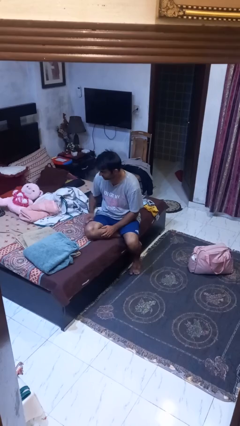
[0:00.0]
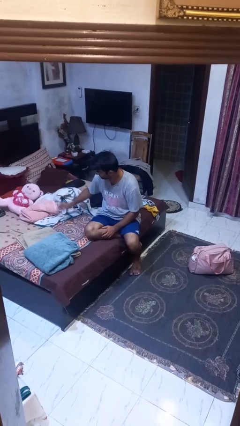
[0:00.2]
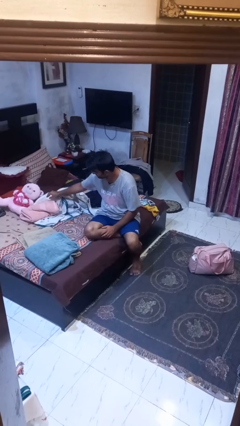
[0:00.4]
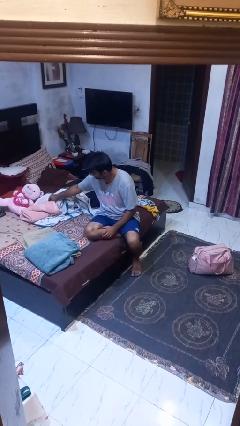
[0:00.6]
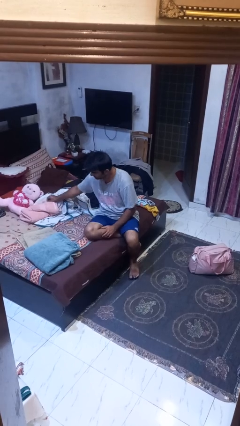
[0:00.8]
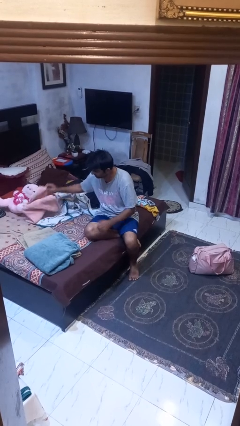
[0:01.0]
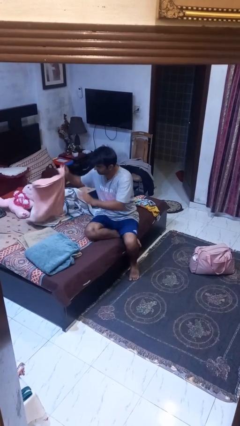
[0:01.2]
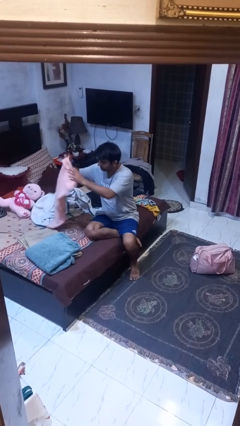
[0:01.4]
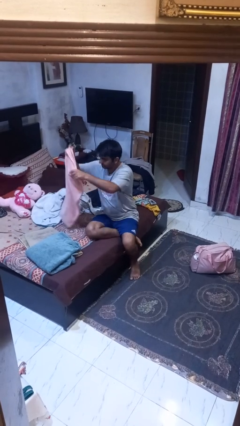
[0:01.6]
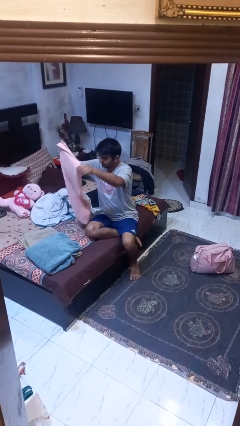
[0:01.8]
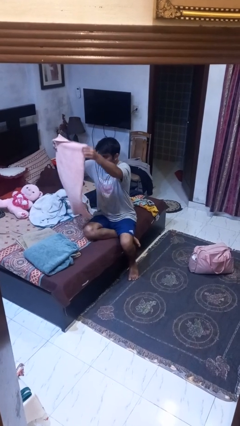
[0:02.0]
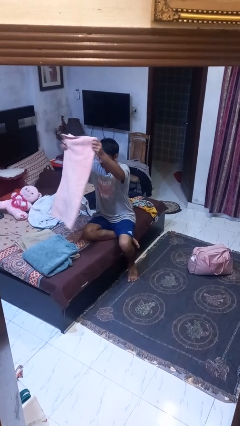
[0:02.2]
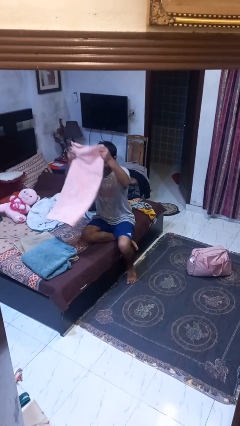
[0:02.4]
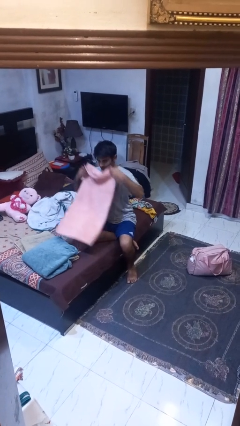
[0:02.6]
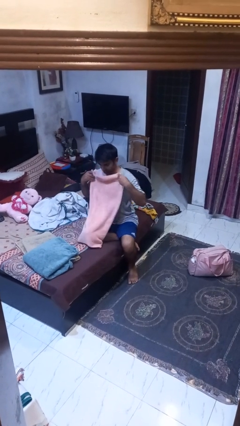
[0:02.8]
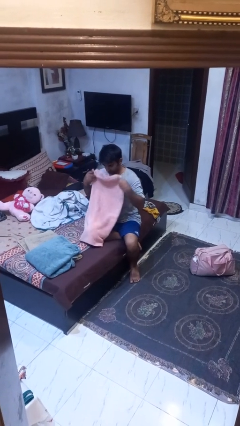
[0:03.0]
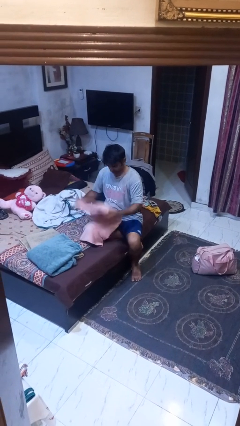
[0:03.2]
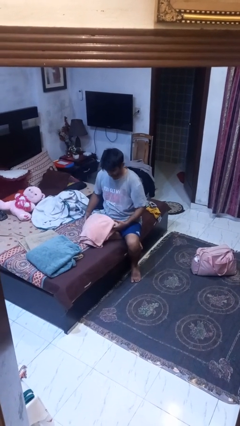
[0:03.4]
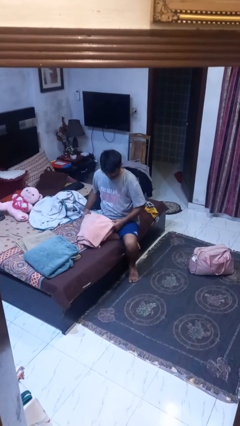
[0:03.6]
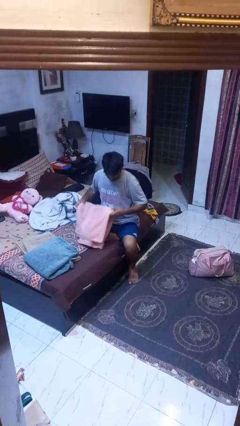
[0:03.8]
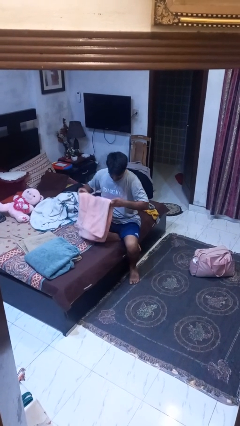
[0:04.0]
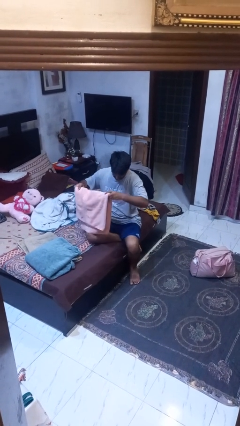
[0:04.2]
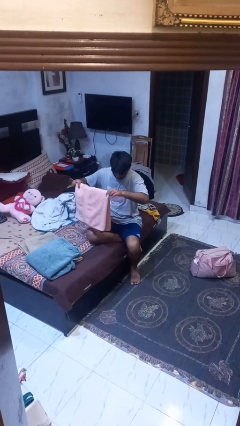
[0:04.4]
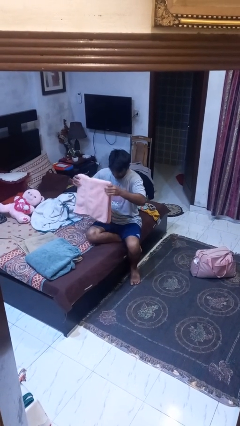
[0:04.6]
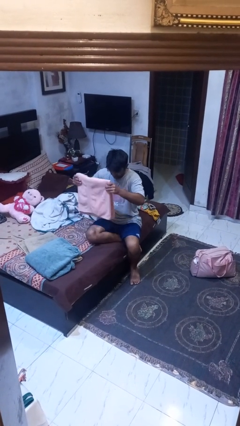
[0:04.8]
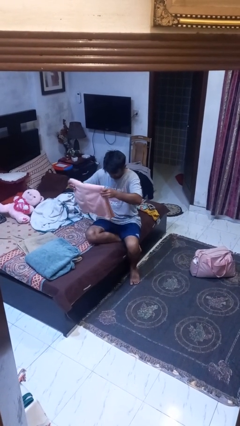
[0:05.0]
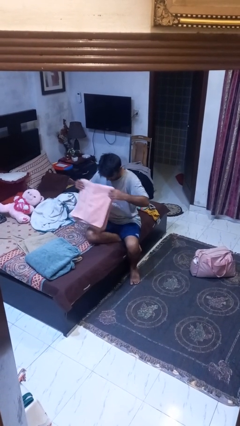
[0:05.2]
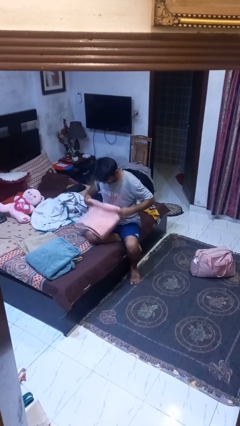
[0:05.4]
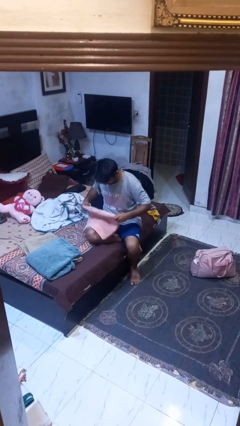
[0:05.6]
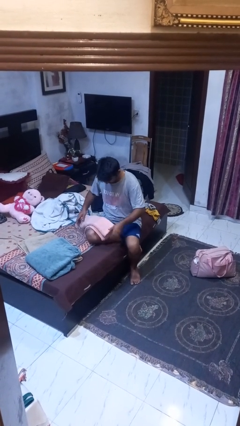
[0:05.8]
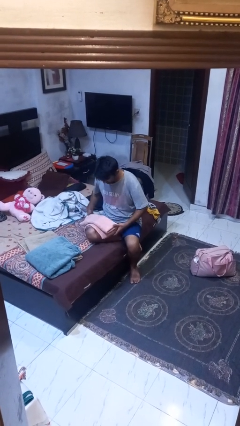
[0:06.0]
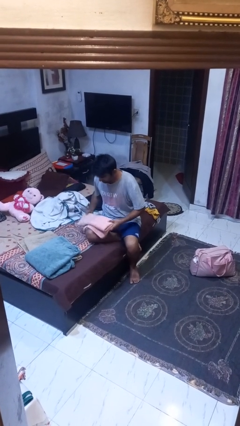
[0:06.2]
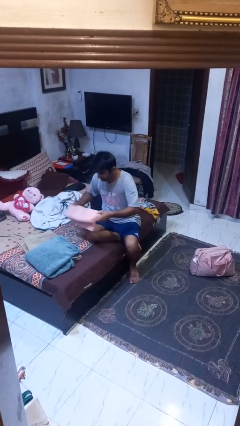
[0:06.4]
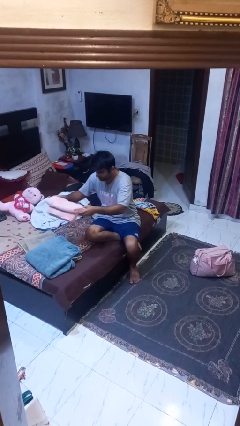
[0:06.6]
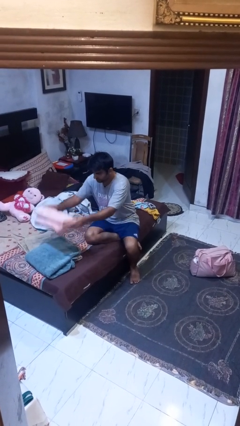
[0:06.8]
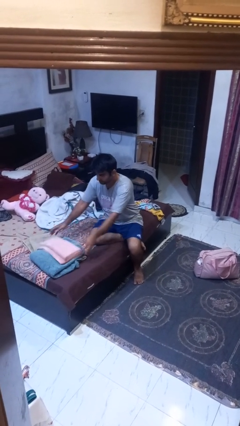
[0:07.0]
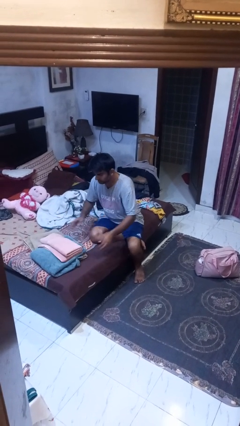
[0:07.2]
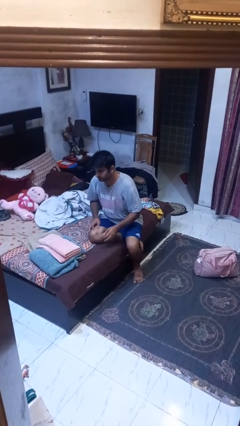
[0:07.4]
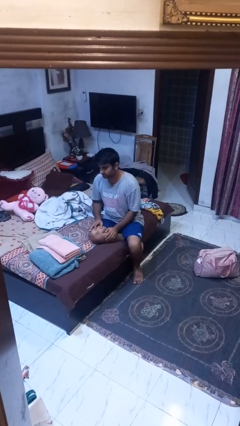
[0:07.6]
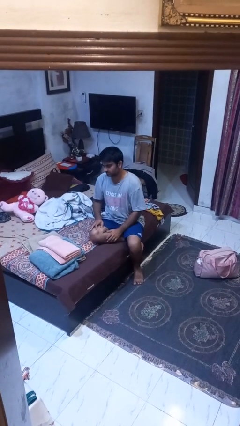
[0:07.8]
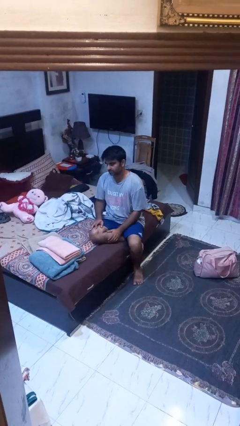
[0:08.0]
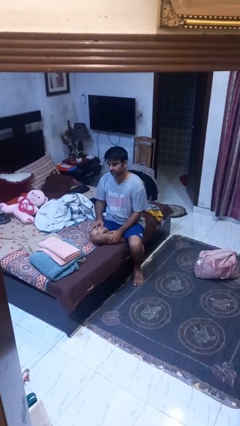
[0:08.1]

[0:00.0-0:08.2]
person folds towel

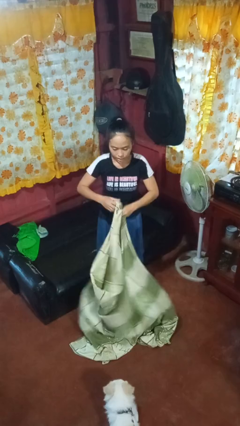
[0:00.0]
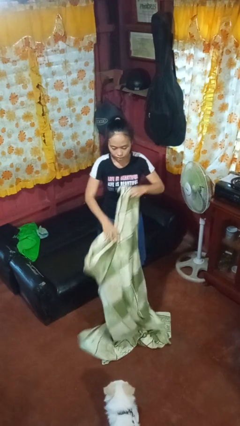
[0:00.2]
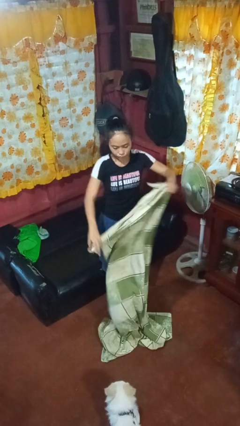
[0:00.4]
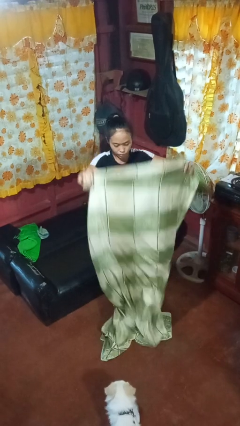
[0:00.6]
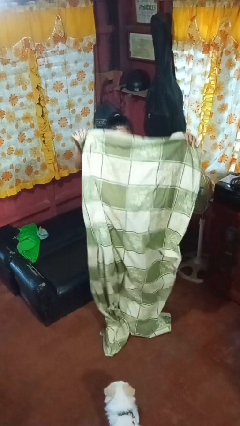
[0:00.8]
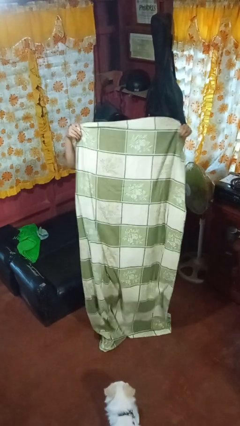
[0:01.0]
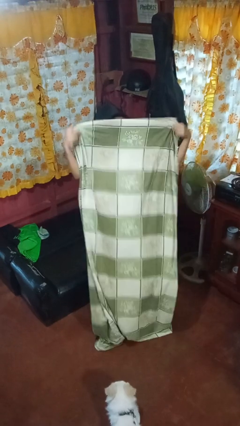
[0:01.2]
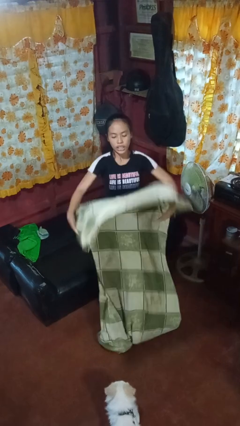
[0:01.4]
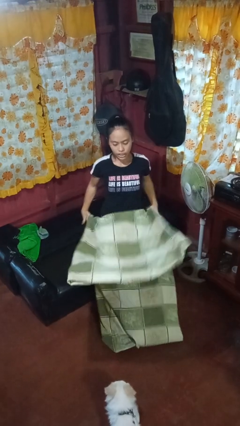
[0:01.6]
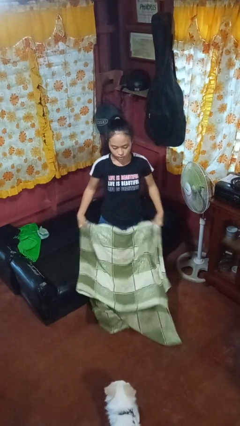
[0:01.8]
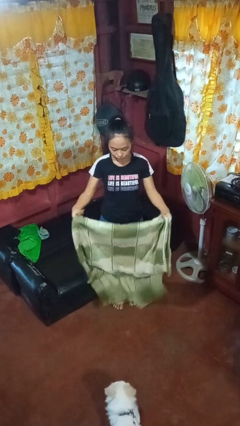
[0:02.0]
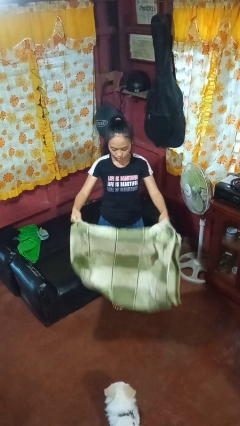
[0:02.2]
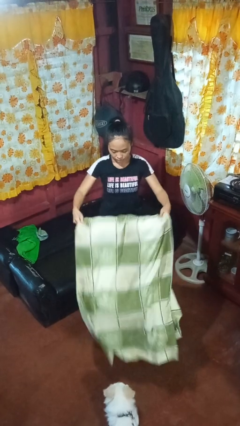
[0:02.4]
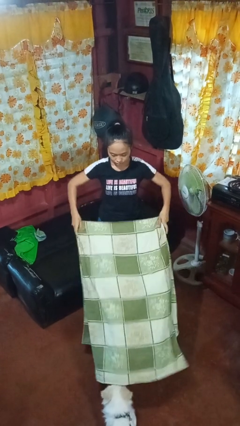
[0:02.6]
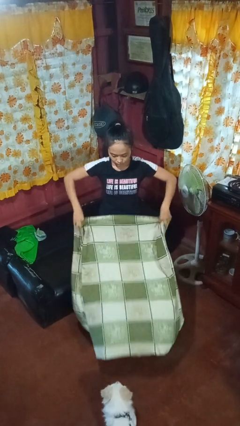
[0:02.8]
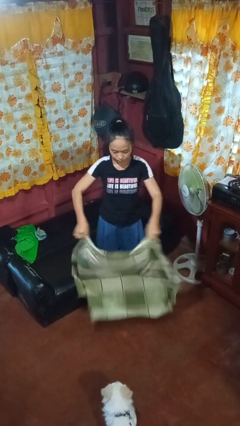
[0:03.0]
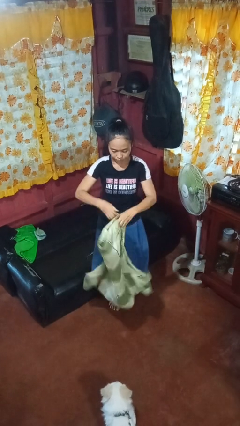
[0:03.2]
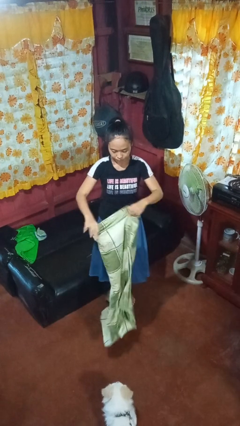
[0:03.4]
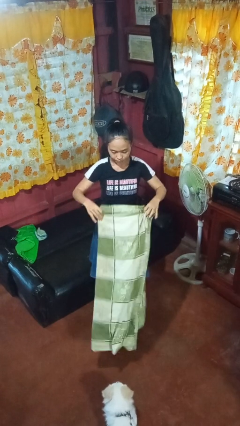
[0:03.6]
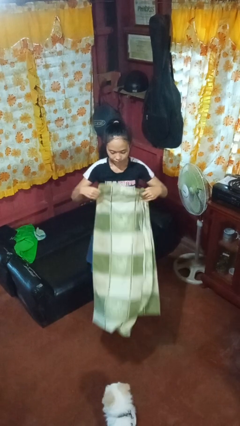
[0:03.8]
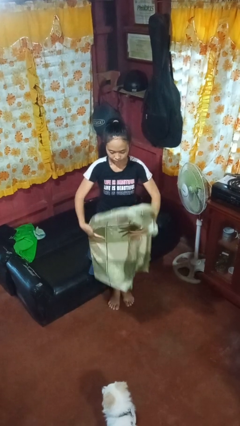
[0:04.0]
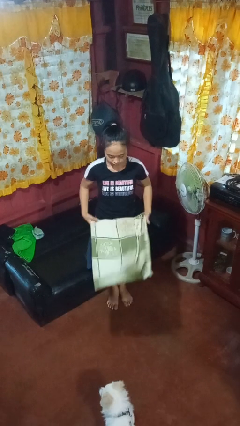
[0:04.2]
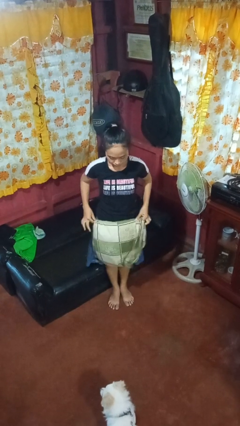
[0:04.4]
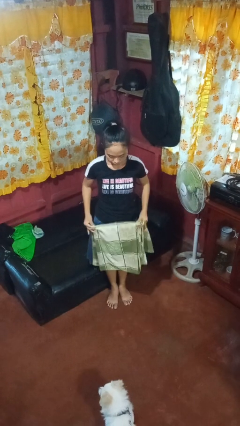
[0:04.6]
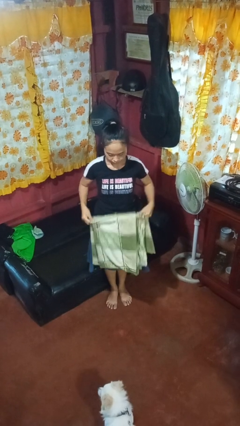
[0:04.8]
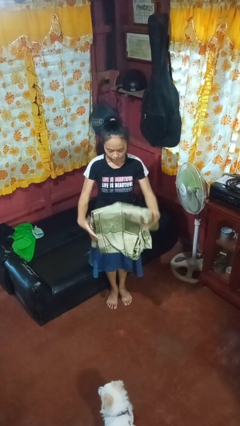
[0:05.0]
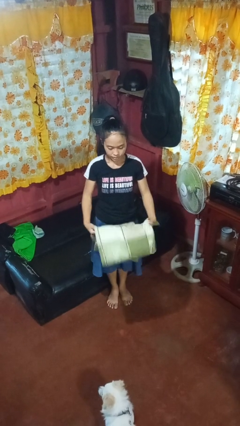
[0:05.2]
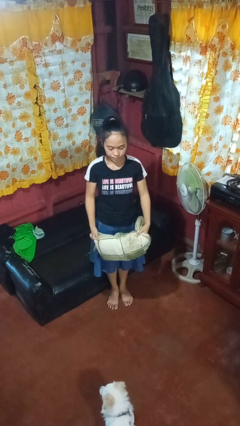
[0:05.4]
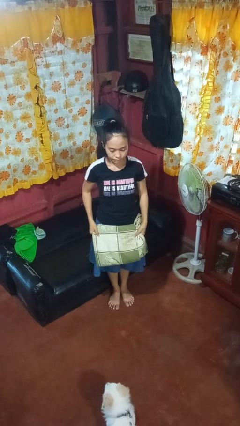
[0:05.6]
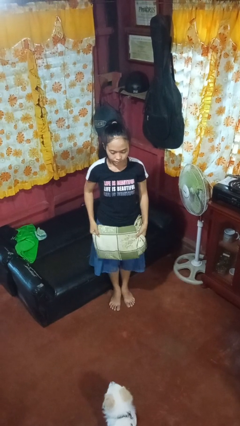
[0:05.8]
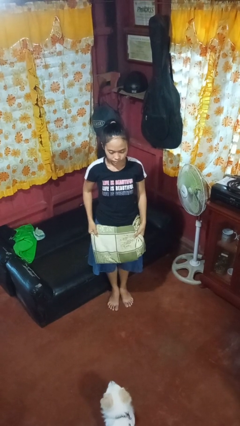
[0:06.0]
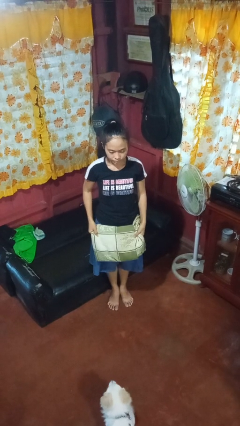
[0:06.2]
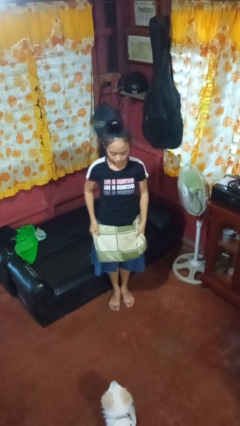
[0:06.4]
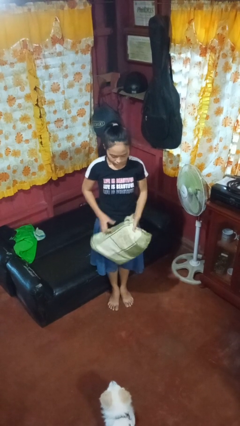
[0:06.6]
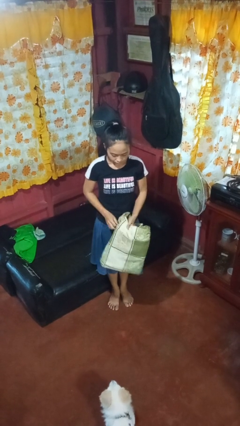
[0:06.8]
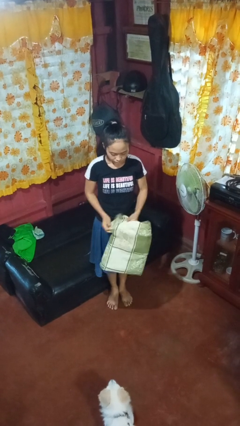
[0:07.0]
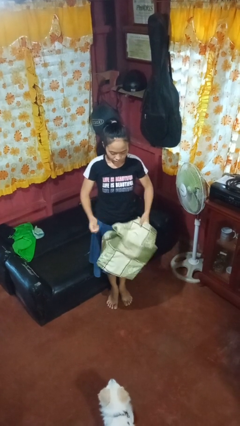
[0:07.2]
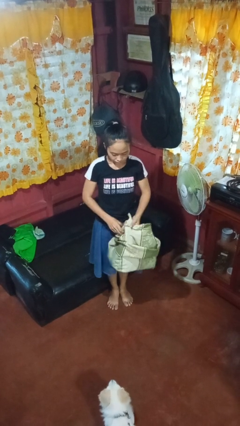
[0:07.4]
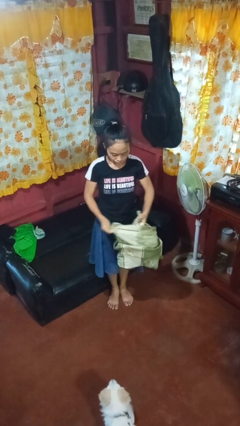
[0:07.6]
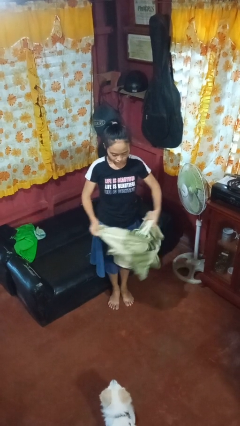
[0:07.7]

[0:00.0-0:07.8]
person folds blanket

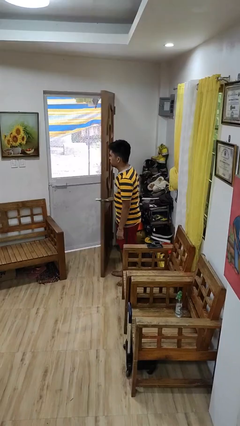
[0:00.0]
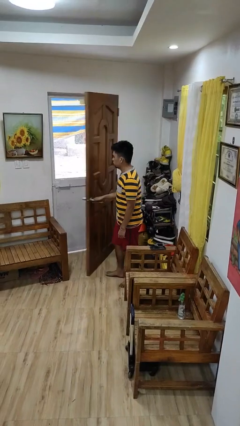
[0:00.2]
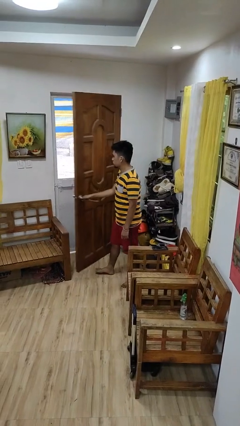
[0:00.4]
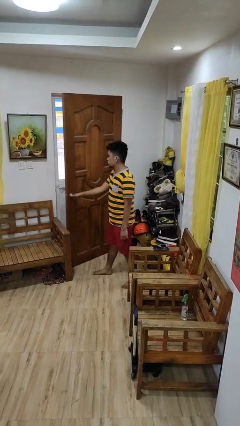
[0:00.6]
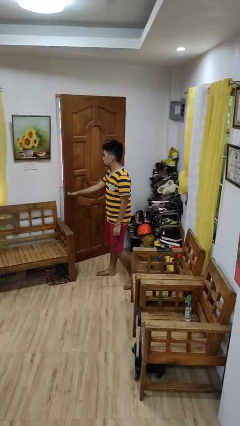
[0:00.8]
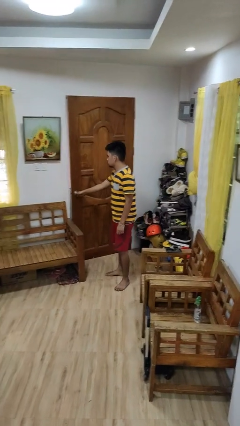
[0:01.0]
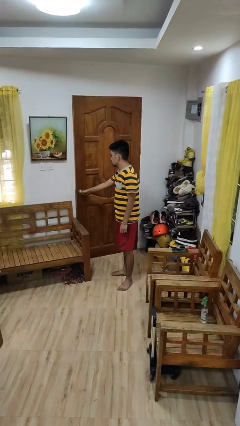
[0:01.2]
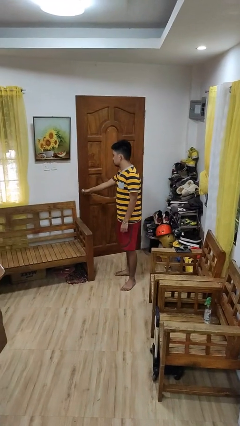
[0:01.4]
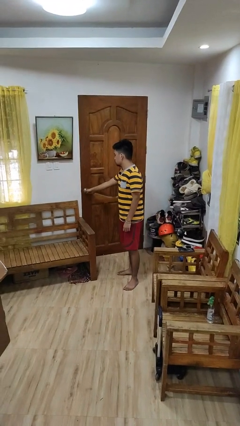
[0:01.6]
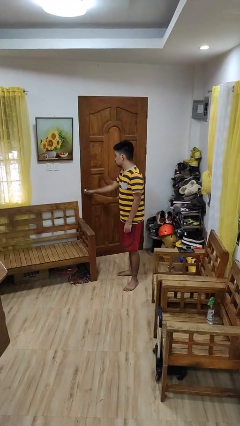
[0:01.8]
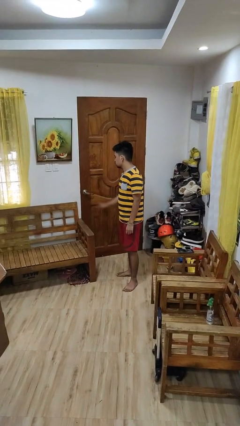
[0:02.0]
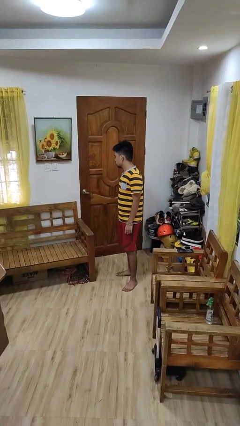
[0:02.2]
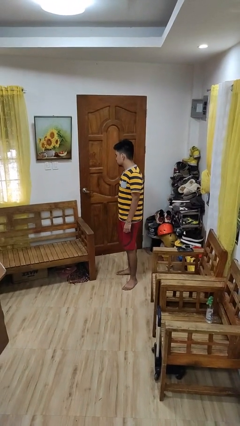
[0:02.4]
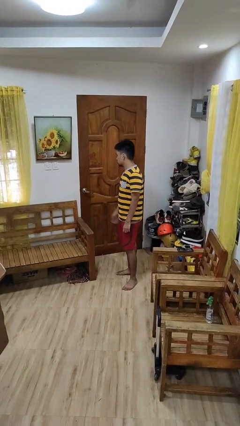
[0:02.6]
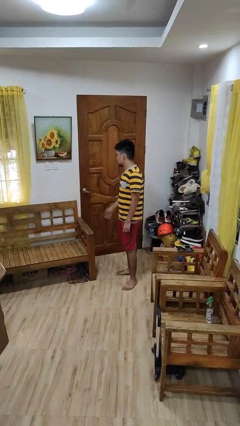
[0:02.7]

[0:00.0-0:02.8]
person closes facility door
